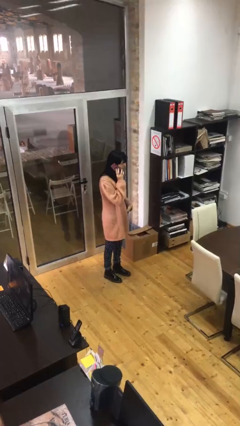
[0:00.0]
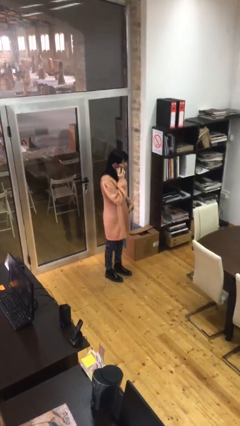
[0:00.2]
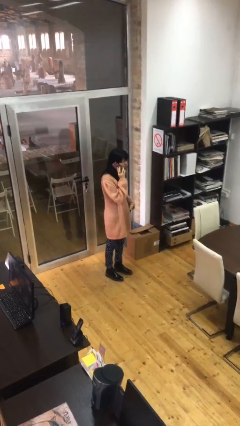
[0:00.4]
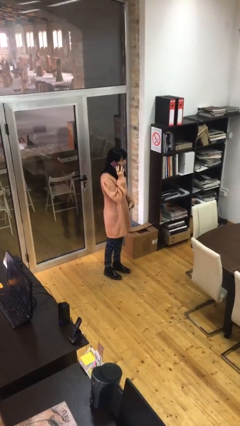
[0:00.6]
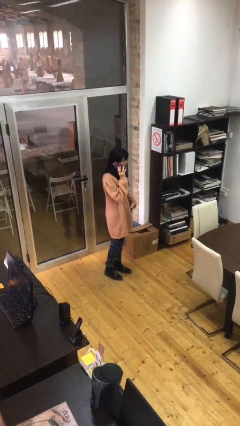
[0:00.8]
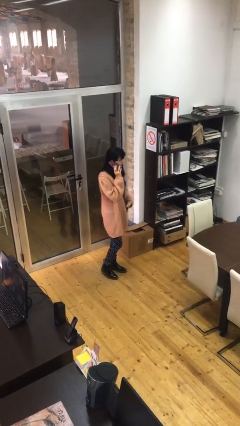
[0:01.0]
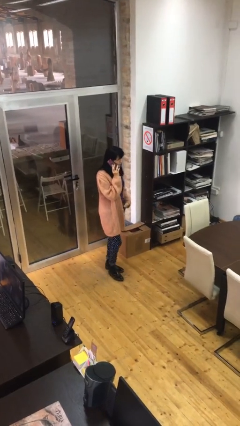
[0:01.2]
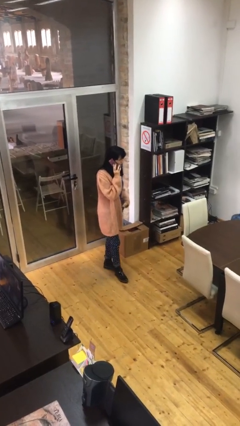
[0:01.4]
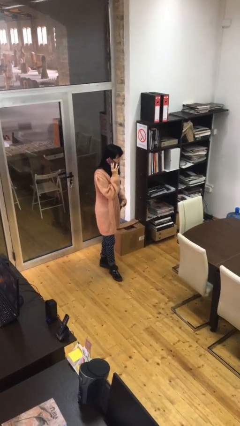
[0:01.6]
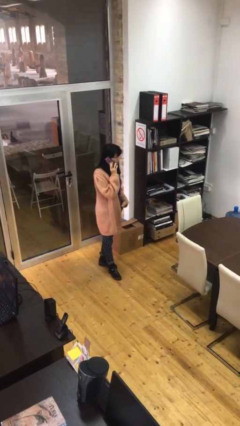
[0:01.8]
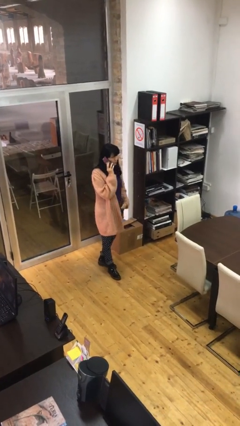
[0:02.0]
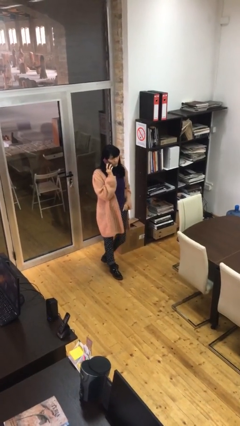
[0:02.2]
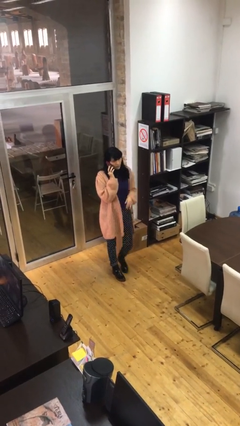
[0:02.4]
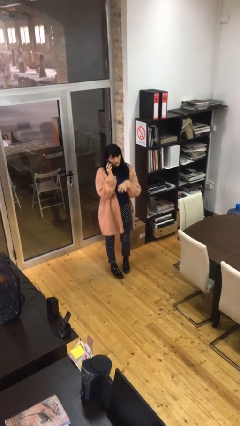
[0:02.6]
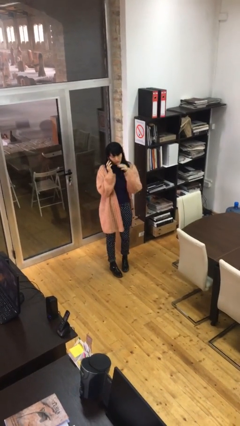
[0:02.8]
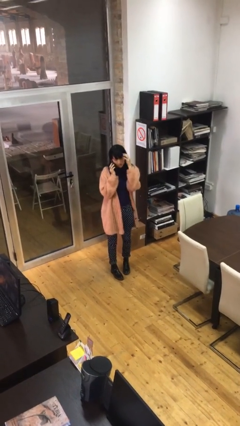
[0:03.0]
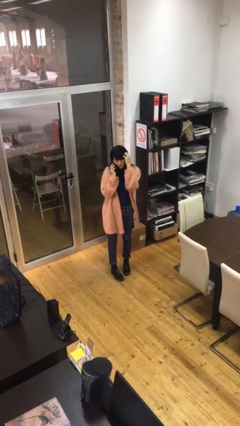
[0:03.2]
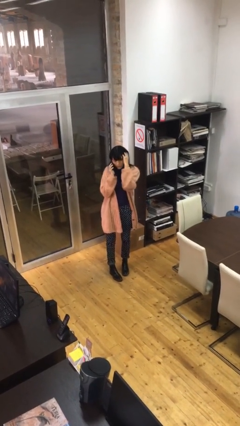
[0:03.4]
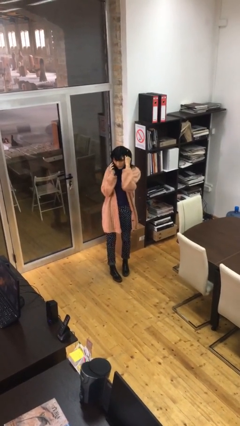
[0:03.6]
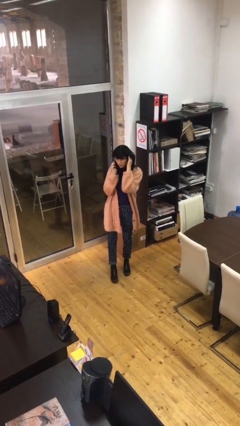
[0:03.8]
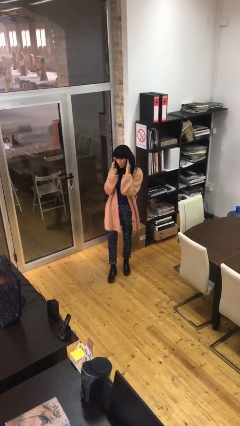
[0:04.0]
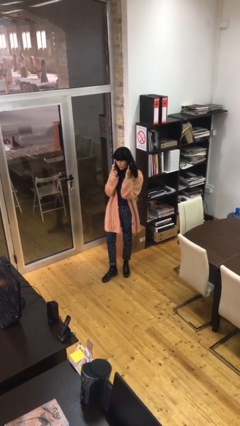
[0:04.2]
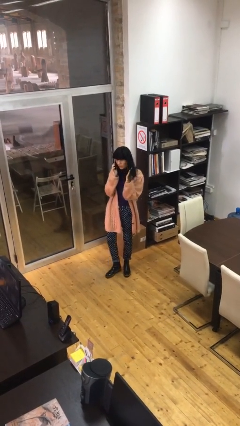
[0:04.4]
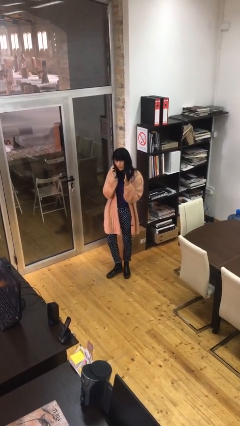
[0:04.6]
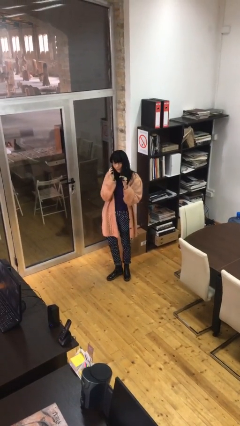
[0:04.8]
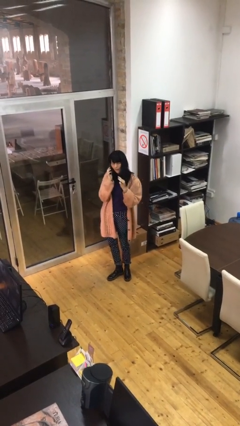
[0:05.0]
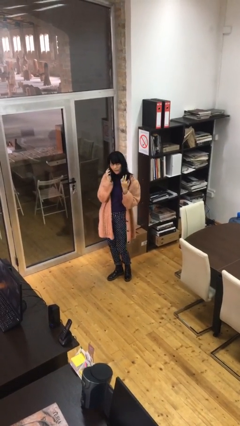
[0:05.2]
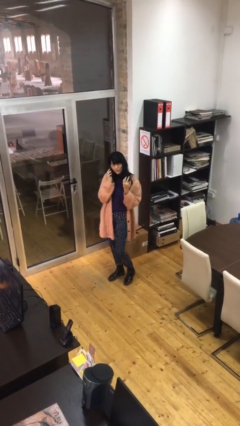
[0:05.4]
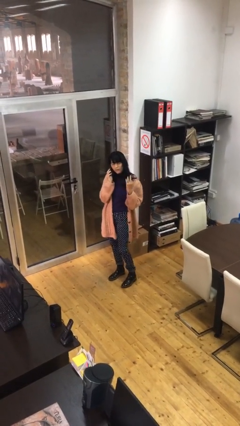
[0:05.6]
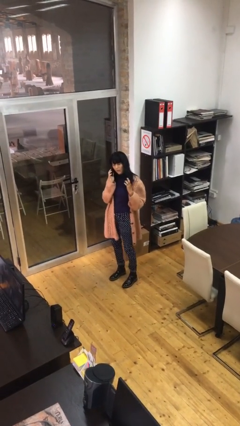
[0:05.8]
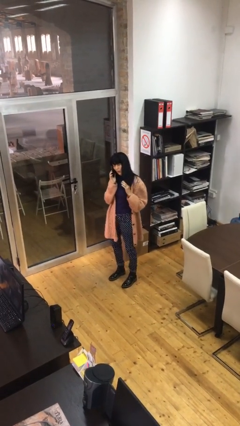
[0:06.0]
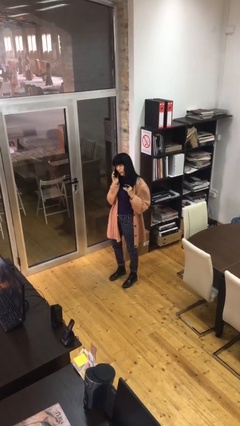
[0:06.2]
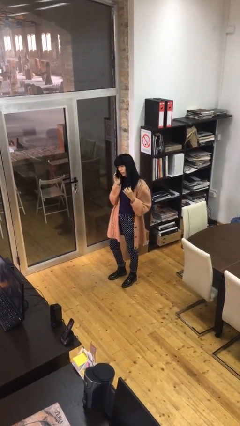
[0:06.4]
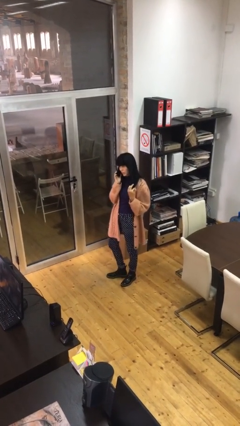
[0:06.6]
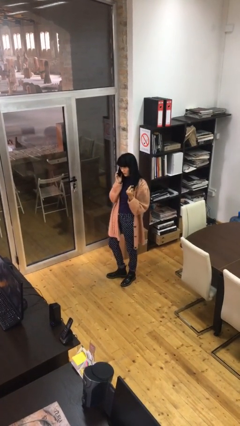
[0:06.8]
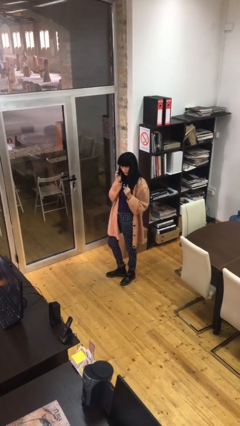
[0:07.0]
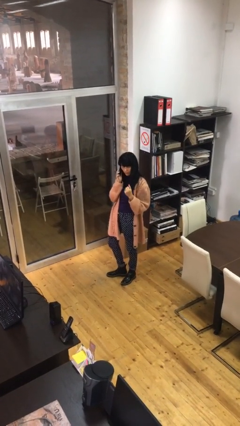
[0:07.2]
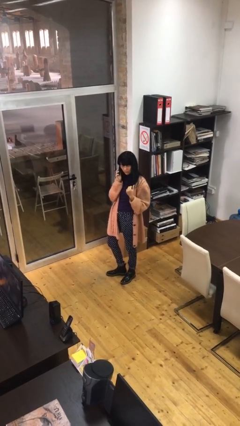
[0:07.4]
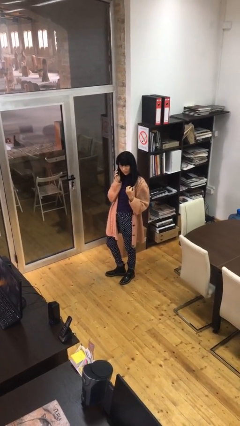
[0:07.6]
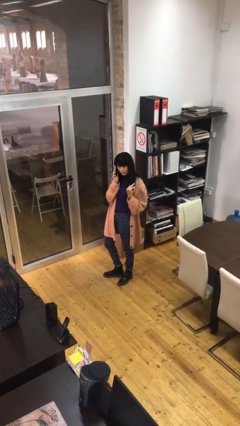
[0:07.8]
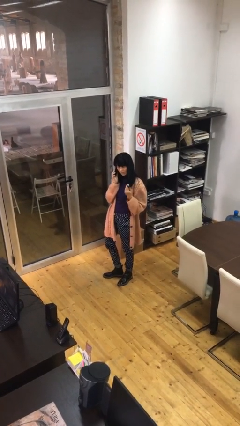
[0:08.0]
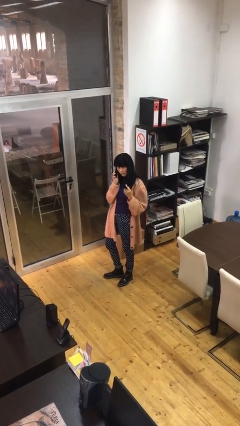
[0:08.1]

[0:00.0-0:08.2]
person talks on phone

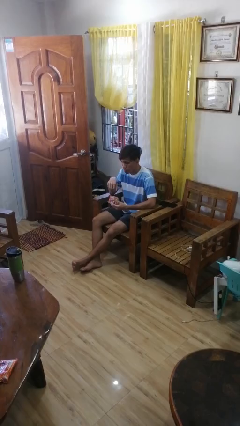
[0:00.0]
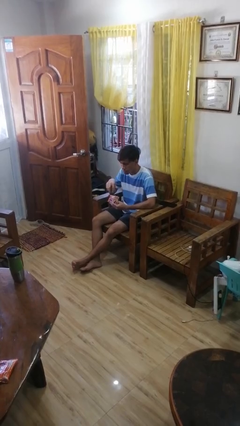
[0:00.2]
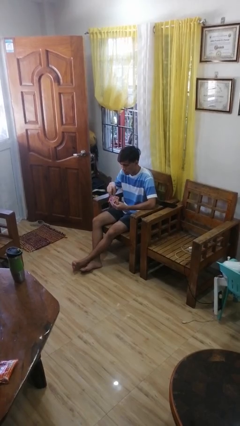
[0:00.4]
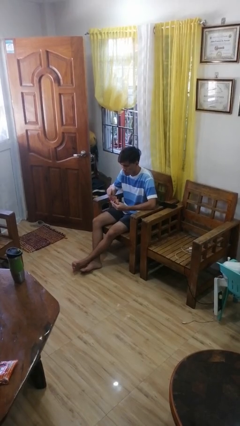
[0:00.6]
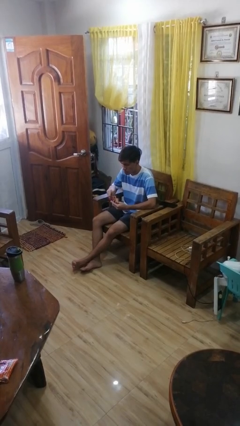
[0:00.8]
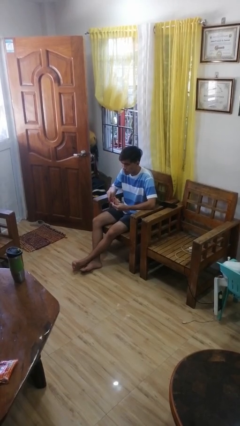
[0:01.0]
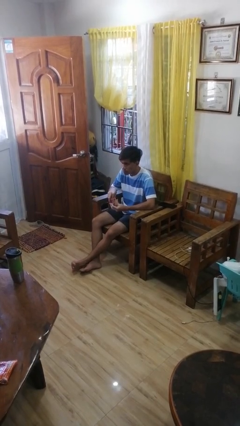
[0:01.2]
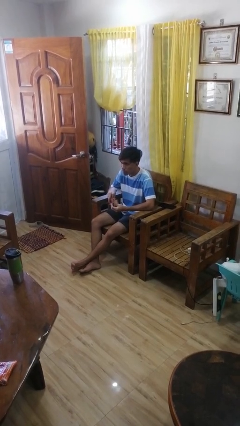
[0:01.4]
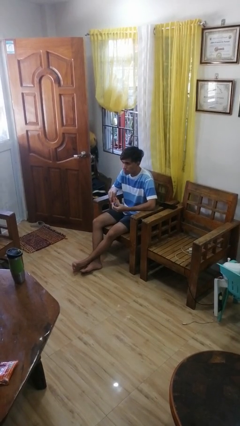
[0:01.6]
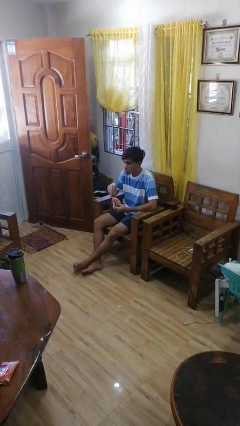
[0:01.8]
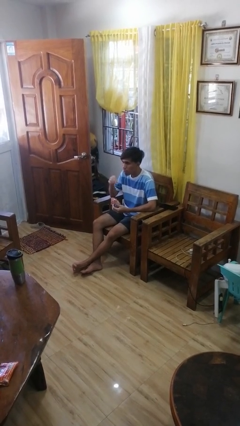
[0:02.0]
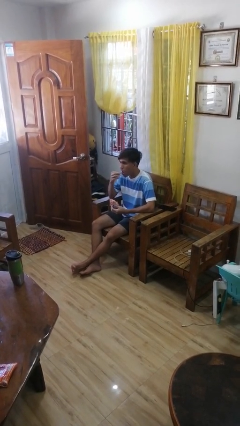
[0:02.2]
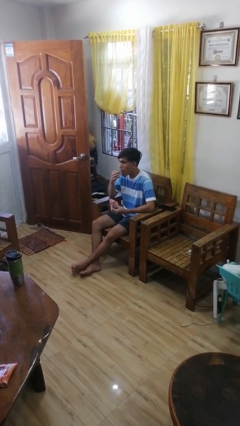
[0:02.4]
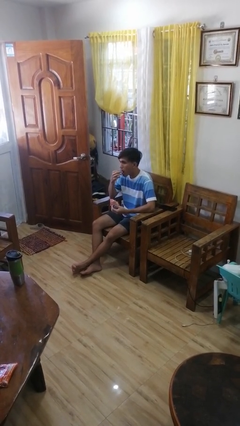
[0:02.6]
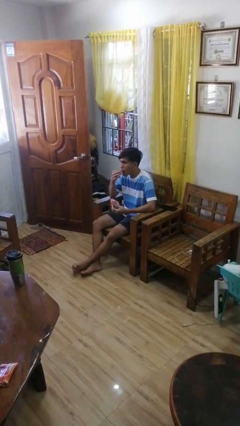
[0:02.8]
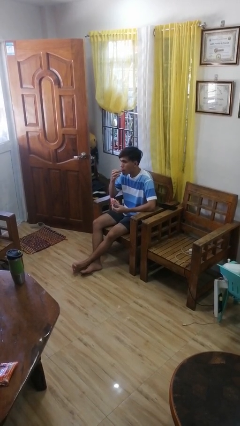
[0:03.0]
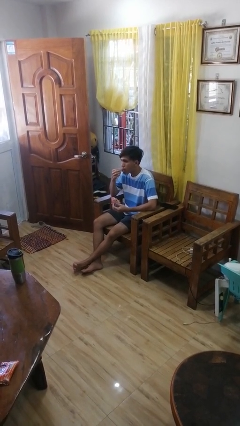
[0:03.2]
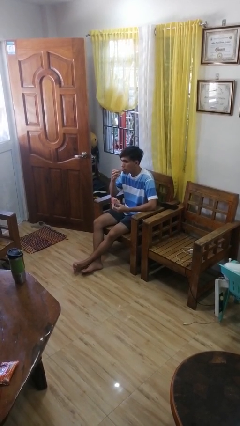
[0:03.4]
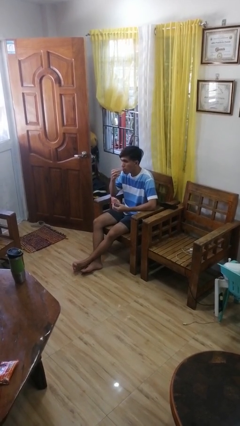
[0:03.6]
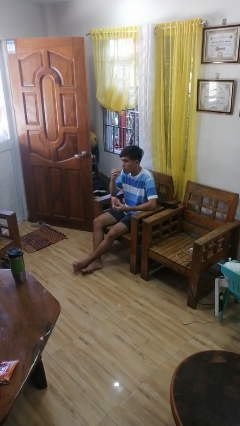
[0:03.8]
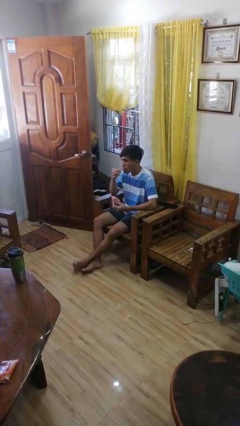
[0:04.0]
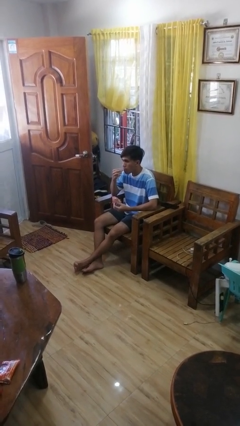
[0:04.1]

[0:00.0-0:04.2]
person eats snack from bag

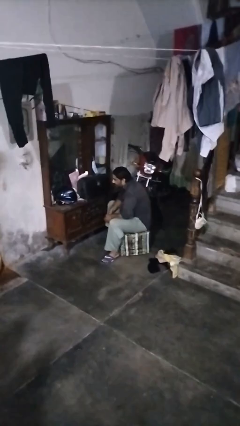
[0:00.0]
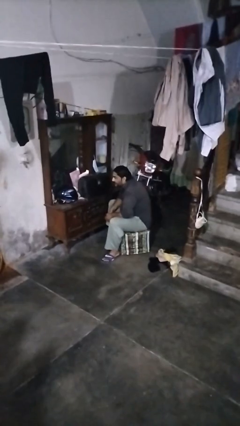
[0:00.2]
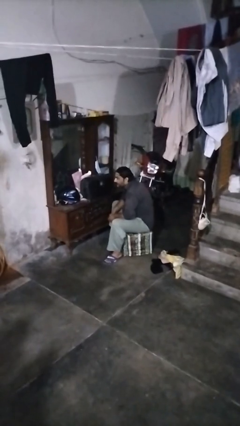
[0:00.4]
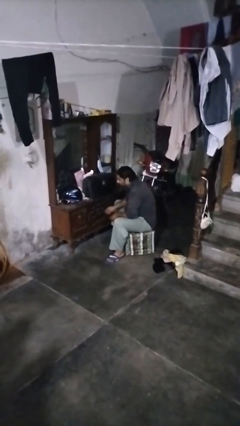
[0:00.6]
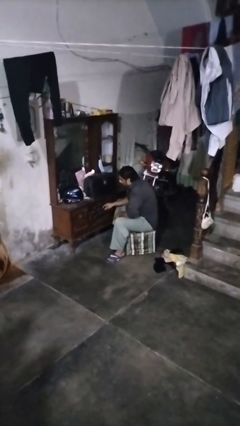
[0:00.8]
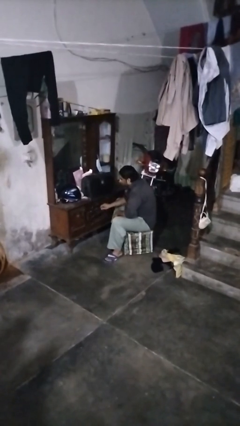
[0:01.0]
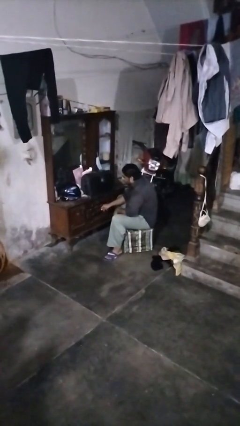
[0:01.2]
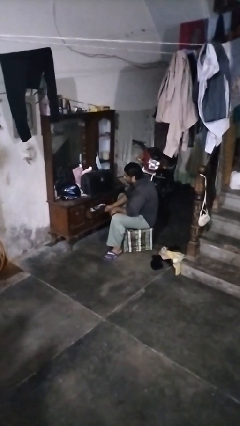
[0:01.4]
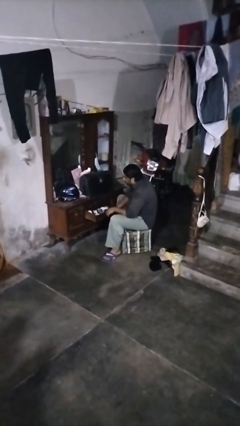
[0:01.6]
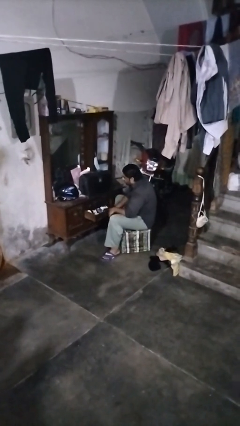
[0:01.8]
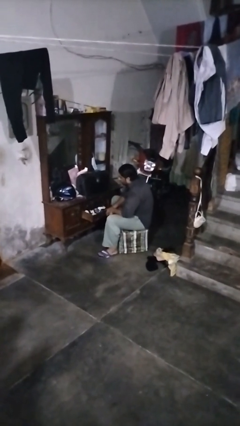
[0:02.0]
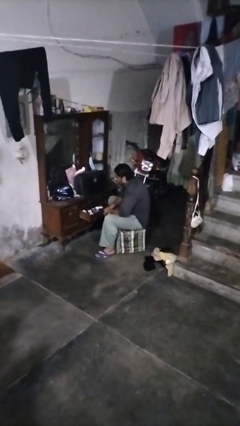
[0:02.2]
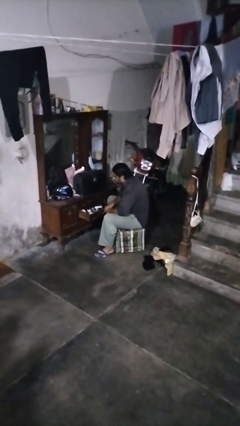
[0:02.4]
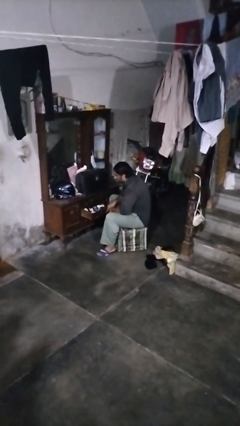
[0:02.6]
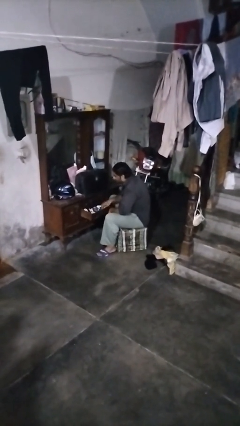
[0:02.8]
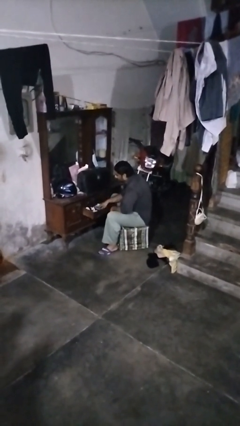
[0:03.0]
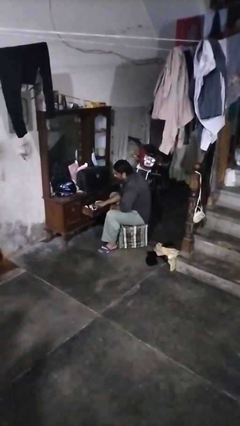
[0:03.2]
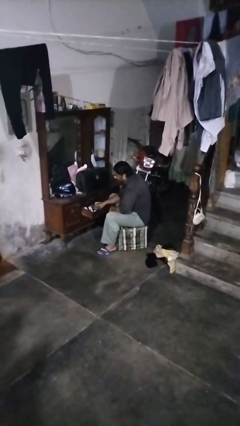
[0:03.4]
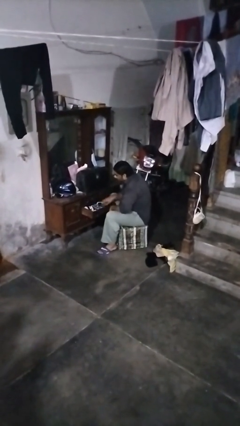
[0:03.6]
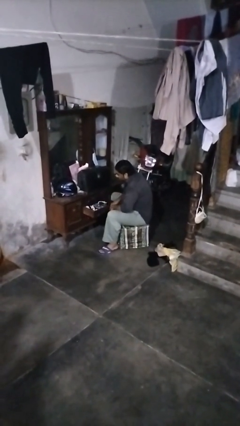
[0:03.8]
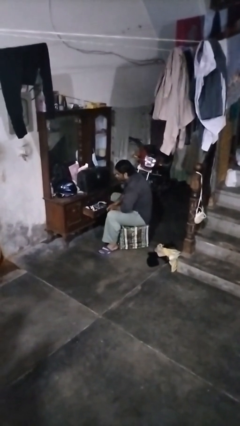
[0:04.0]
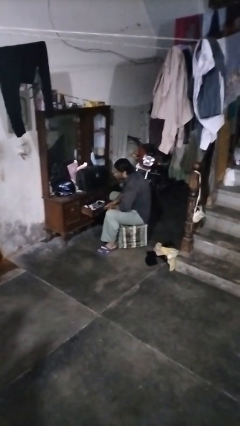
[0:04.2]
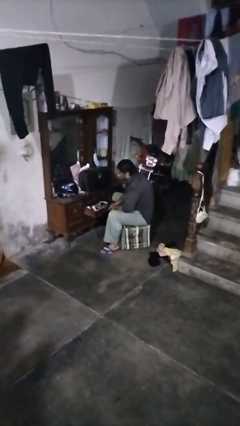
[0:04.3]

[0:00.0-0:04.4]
person opens dresser drawer

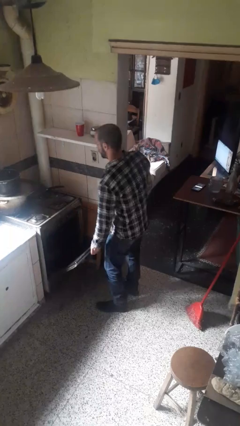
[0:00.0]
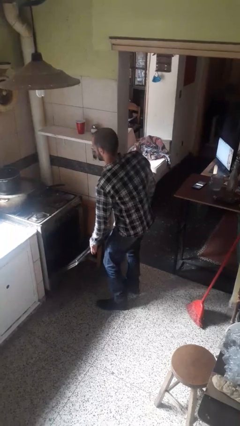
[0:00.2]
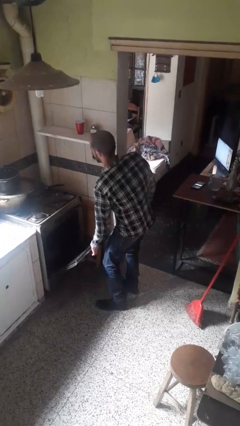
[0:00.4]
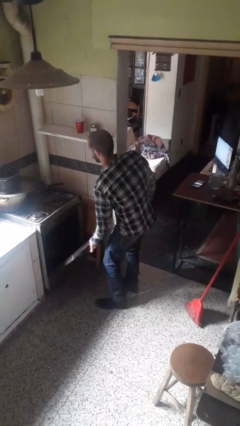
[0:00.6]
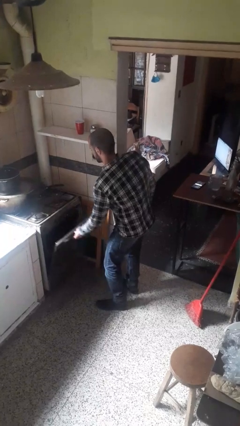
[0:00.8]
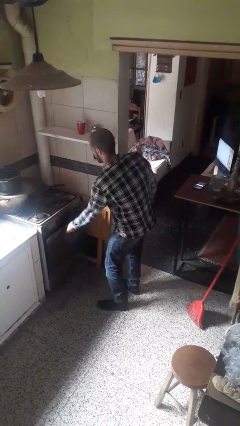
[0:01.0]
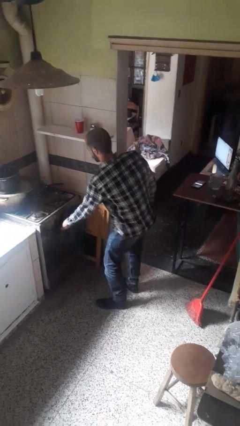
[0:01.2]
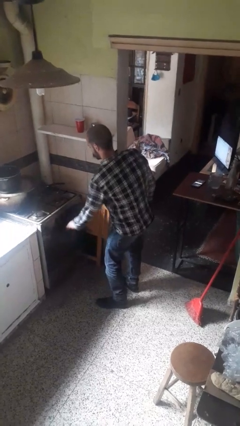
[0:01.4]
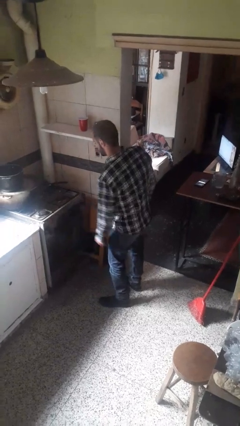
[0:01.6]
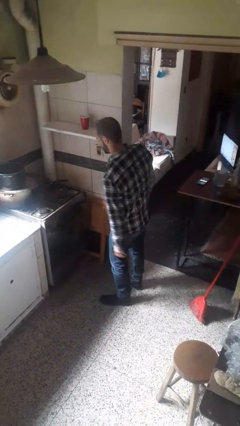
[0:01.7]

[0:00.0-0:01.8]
person closes oven door
